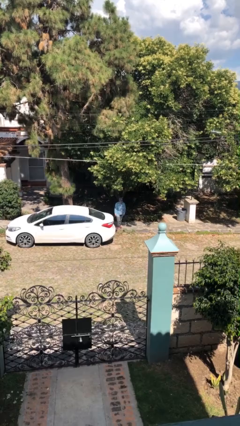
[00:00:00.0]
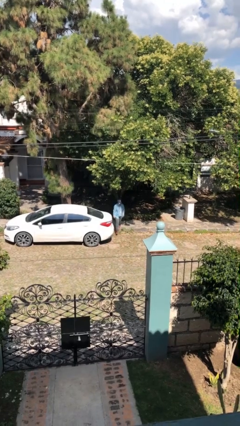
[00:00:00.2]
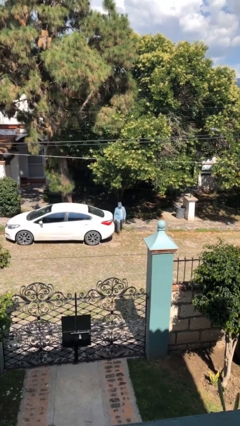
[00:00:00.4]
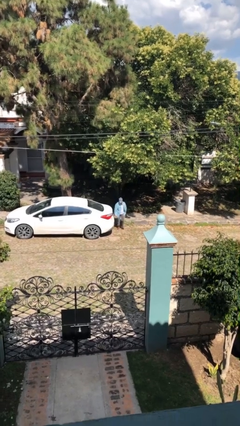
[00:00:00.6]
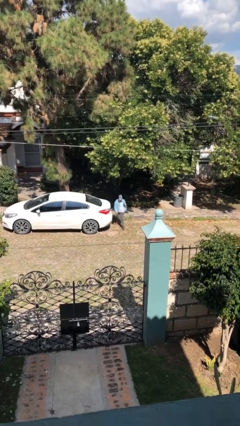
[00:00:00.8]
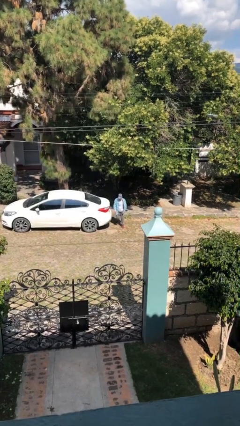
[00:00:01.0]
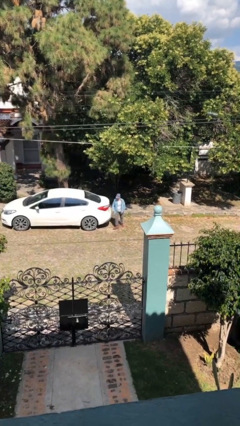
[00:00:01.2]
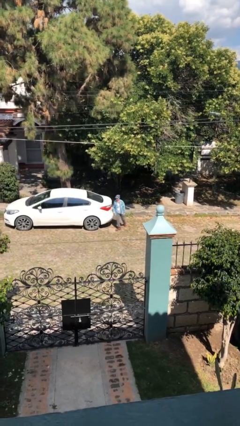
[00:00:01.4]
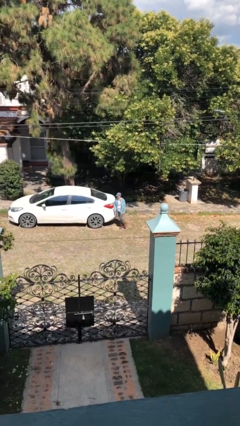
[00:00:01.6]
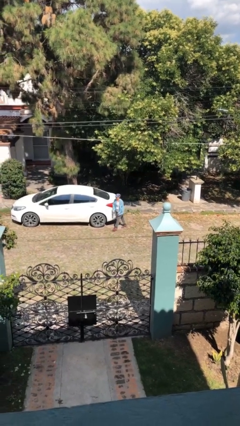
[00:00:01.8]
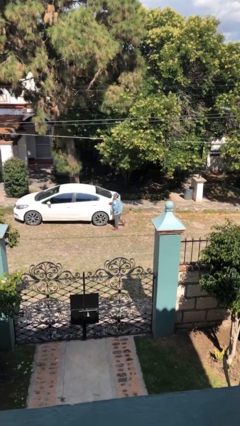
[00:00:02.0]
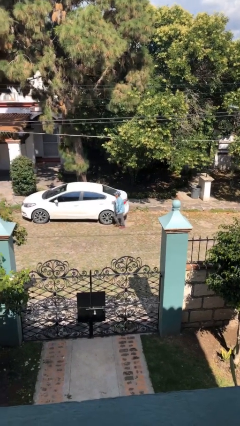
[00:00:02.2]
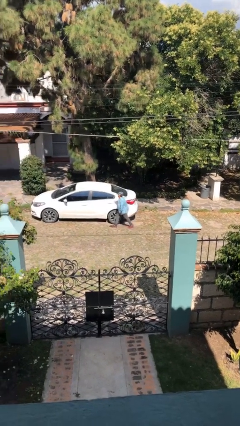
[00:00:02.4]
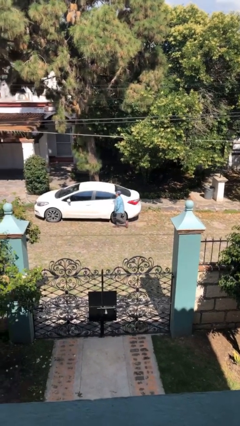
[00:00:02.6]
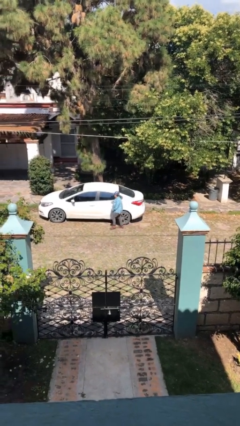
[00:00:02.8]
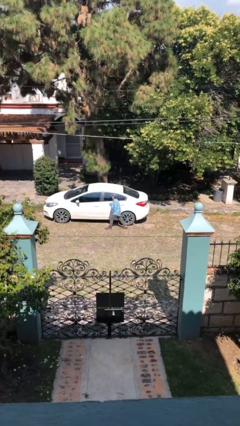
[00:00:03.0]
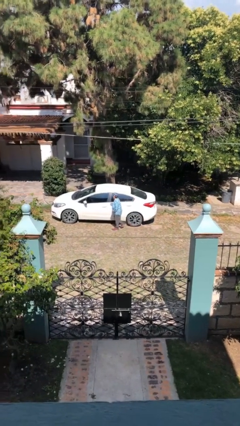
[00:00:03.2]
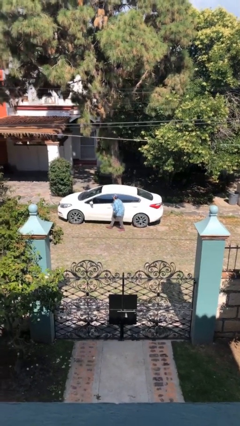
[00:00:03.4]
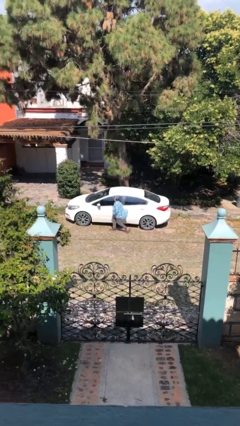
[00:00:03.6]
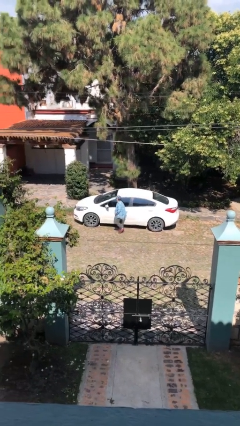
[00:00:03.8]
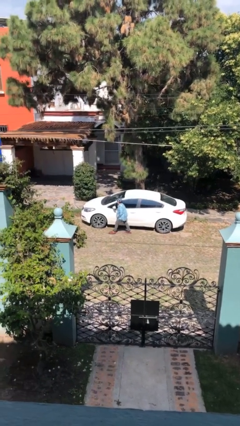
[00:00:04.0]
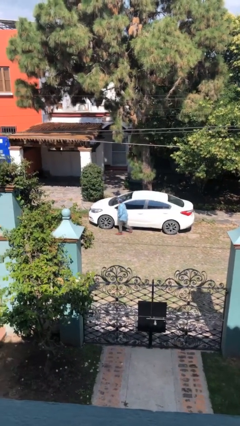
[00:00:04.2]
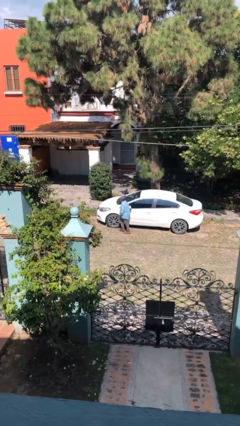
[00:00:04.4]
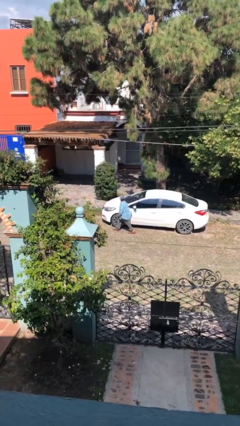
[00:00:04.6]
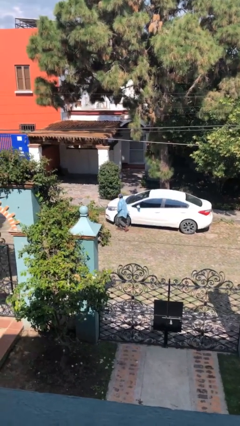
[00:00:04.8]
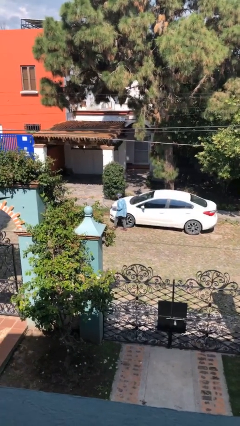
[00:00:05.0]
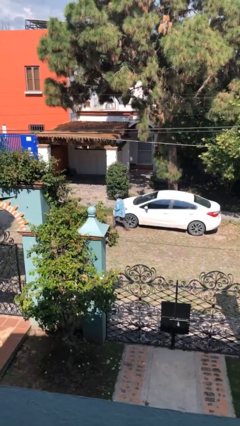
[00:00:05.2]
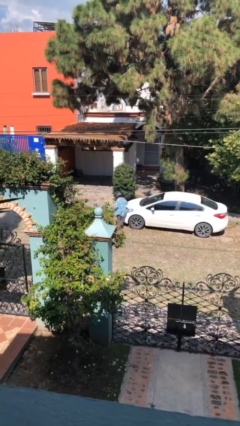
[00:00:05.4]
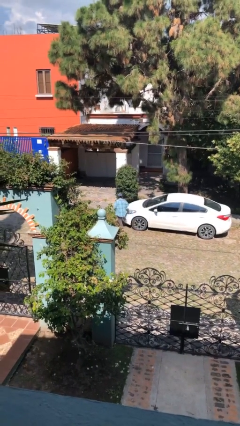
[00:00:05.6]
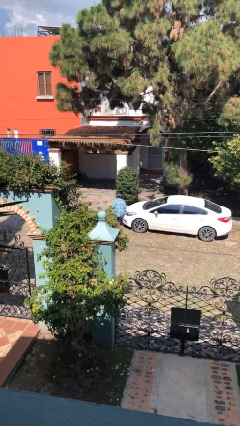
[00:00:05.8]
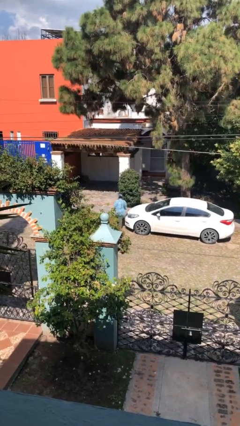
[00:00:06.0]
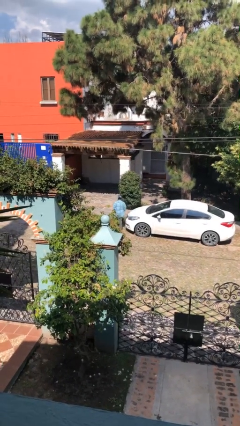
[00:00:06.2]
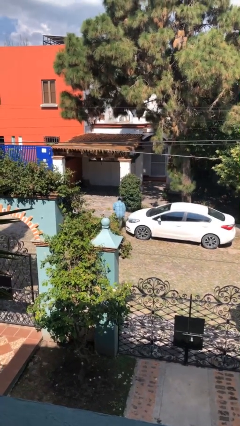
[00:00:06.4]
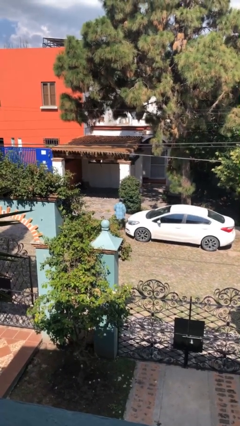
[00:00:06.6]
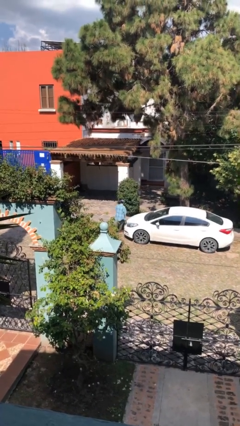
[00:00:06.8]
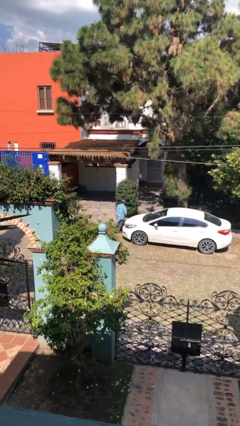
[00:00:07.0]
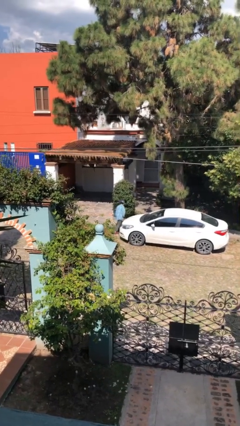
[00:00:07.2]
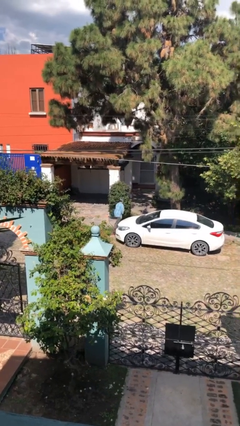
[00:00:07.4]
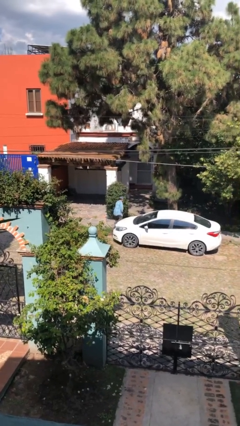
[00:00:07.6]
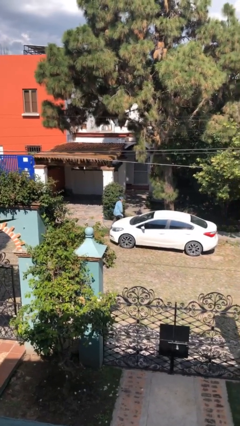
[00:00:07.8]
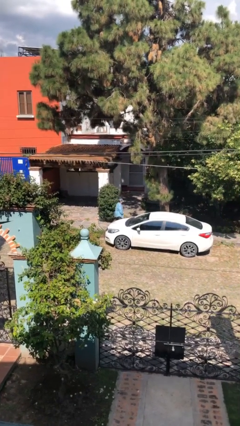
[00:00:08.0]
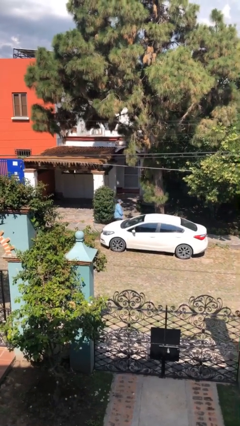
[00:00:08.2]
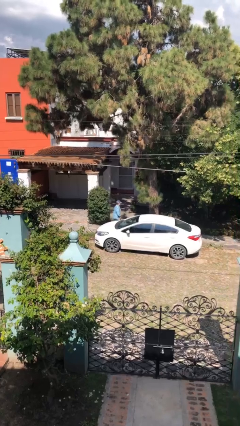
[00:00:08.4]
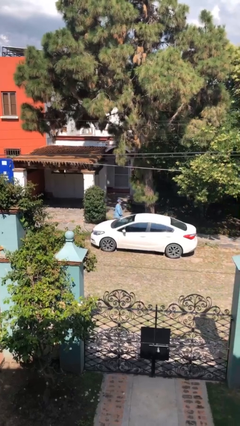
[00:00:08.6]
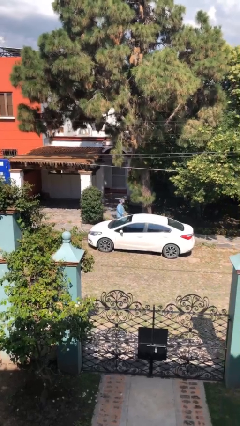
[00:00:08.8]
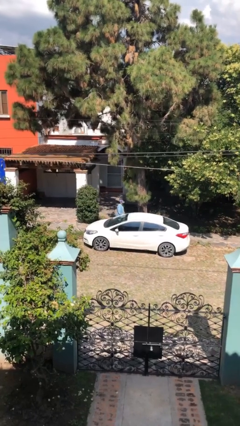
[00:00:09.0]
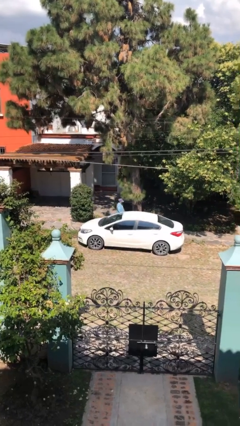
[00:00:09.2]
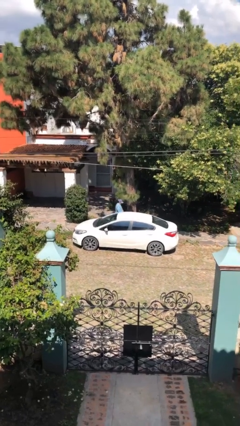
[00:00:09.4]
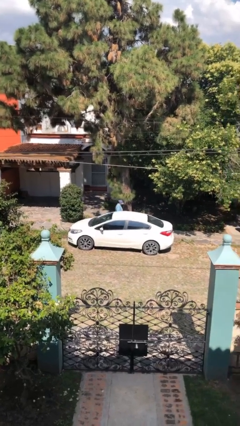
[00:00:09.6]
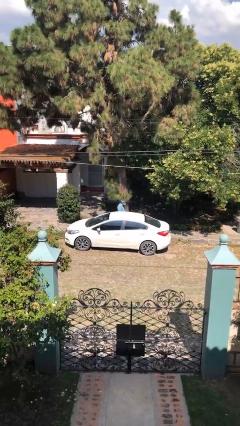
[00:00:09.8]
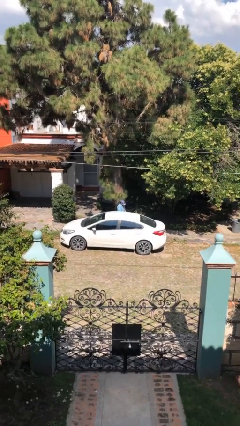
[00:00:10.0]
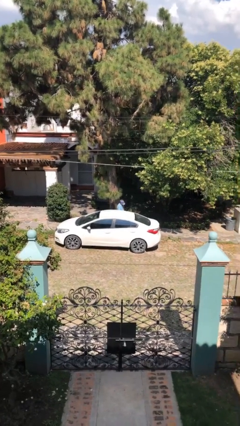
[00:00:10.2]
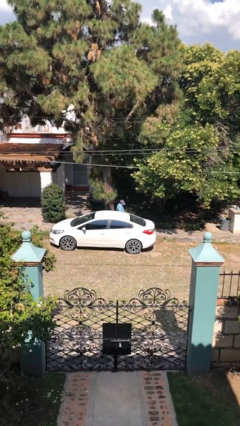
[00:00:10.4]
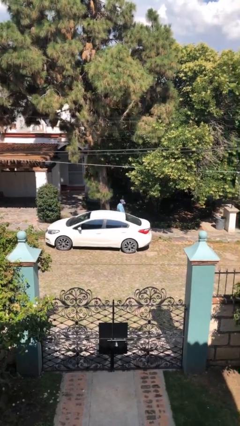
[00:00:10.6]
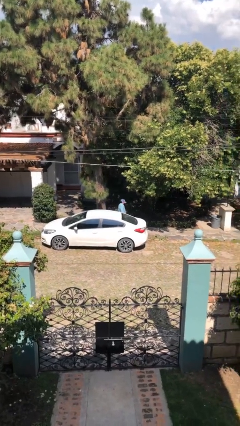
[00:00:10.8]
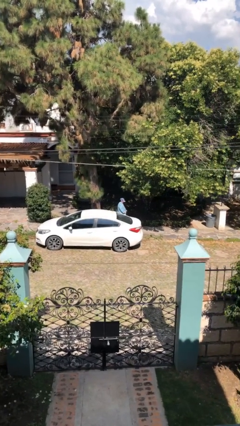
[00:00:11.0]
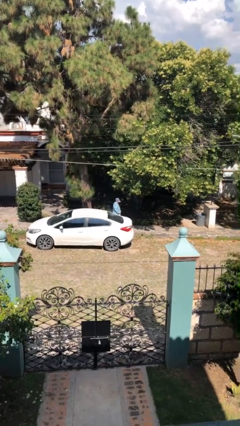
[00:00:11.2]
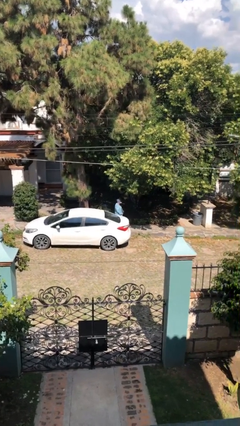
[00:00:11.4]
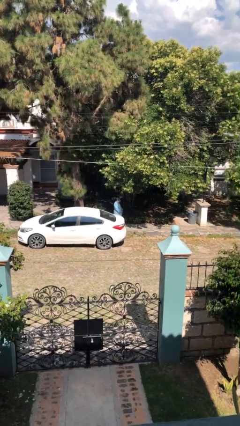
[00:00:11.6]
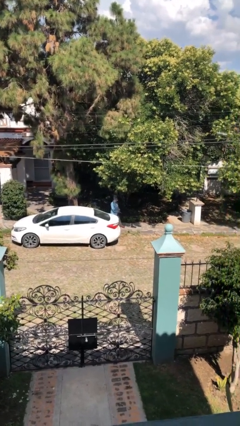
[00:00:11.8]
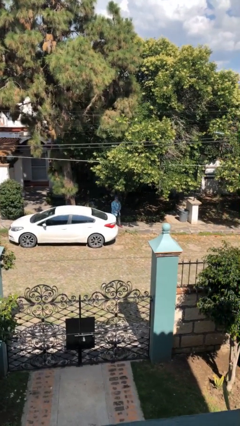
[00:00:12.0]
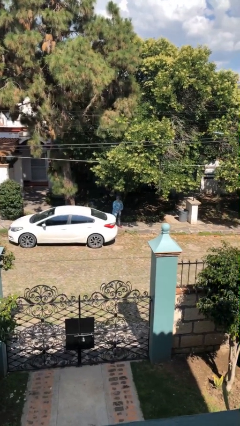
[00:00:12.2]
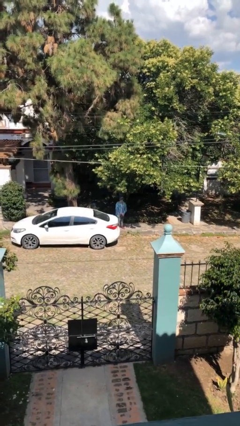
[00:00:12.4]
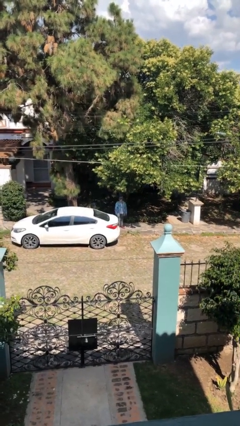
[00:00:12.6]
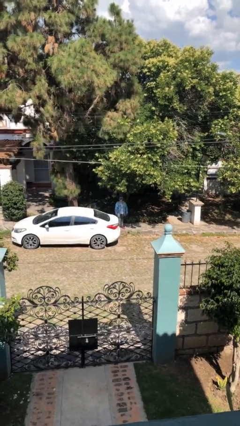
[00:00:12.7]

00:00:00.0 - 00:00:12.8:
person walks around car

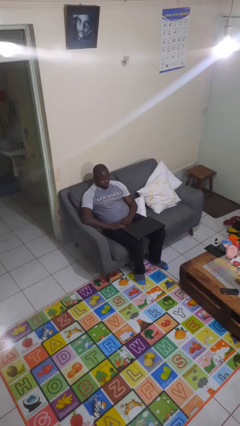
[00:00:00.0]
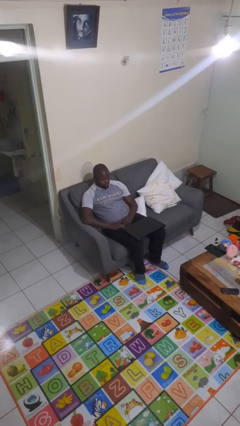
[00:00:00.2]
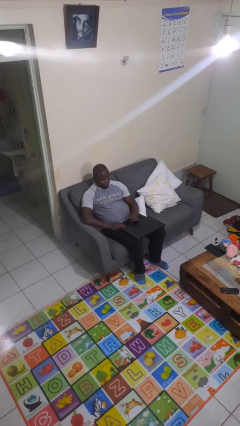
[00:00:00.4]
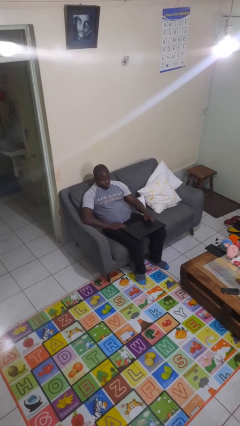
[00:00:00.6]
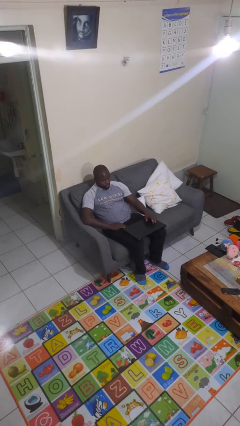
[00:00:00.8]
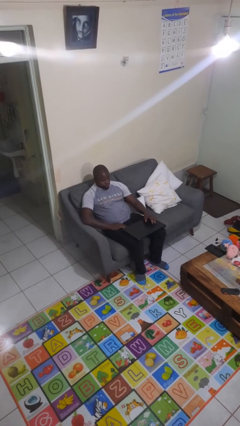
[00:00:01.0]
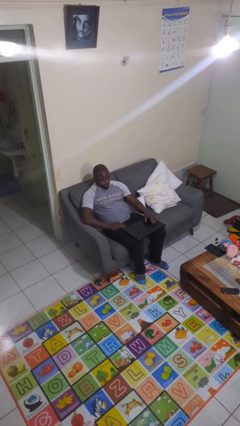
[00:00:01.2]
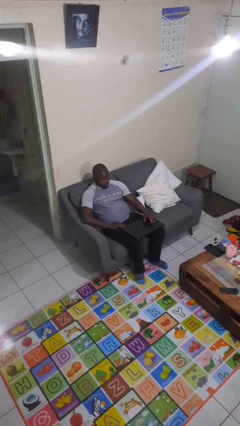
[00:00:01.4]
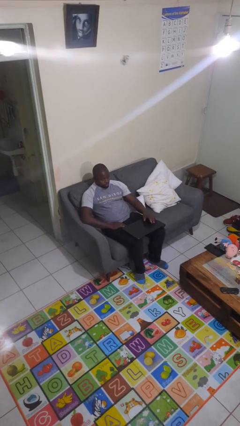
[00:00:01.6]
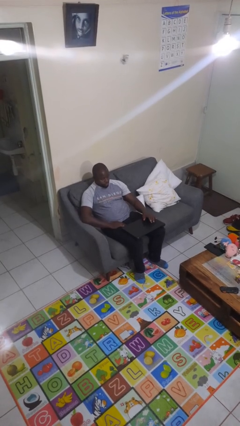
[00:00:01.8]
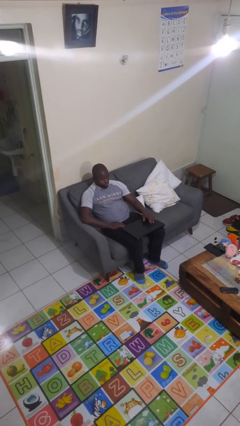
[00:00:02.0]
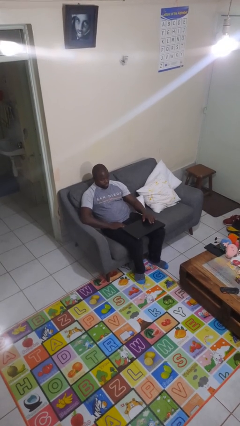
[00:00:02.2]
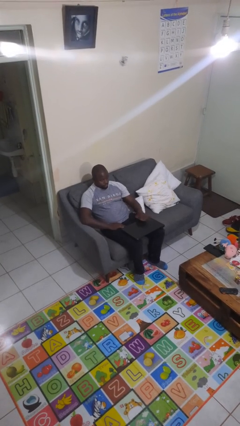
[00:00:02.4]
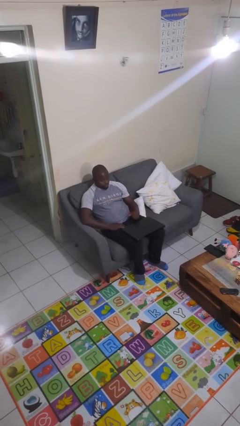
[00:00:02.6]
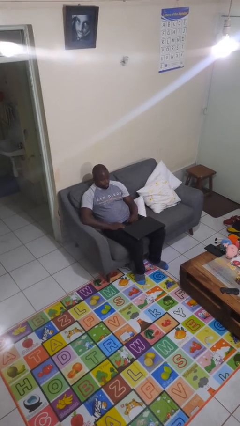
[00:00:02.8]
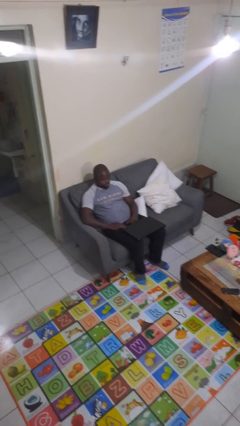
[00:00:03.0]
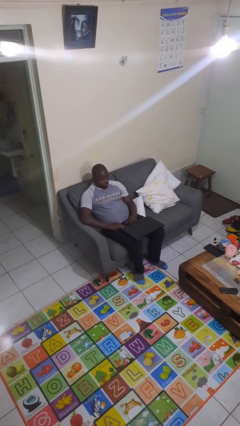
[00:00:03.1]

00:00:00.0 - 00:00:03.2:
person taps object with finger

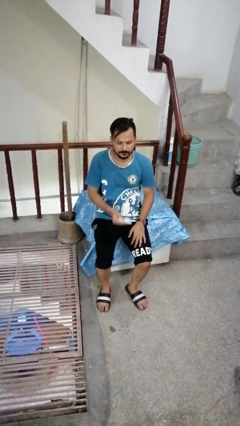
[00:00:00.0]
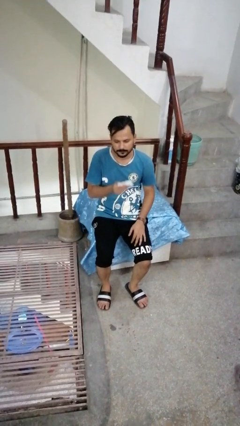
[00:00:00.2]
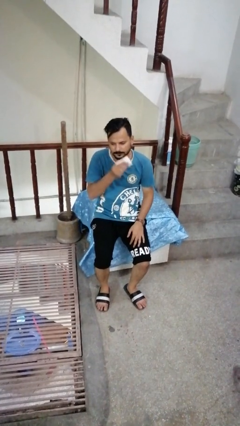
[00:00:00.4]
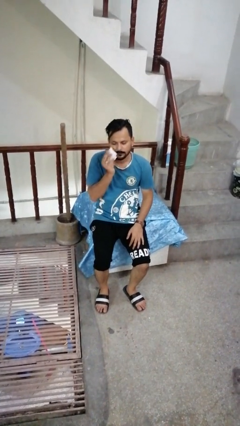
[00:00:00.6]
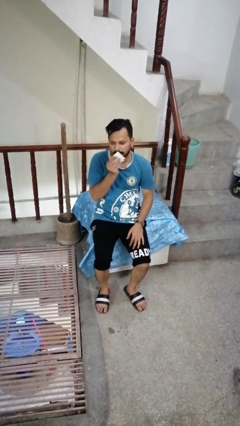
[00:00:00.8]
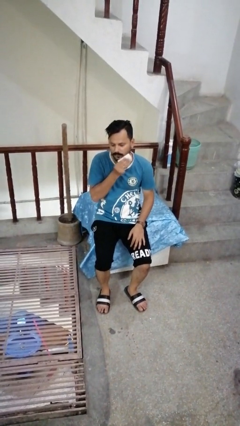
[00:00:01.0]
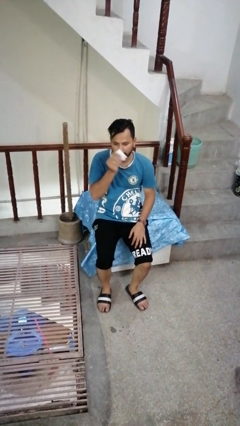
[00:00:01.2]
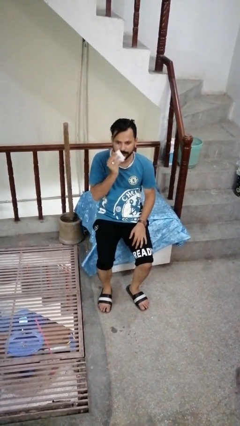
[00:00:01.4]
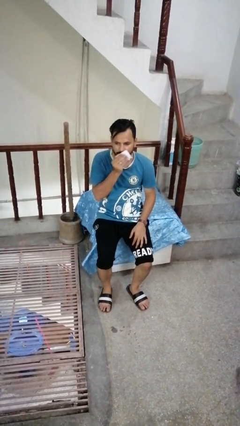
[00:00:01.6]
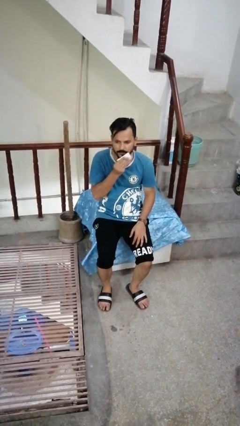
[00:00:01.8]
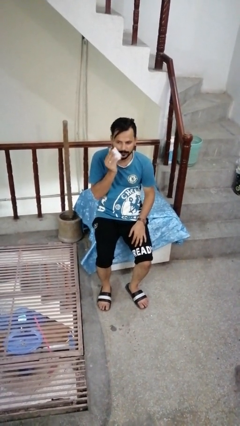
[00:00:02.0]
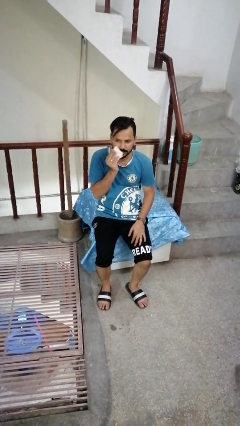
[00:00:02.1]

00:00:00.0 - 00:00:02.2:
person wipes mouth with napkin

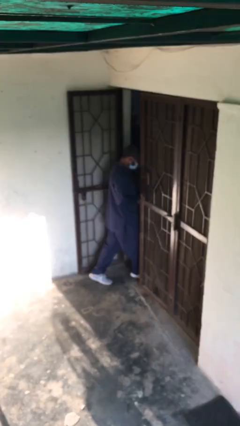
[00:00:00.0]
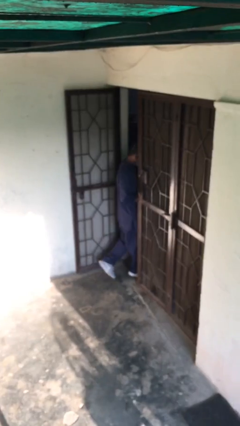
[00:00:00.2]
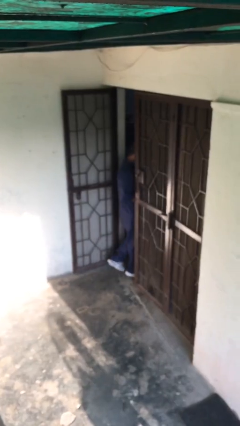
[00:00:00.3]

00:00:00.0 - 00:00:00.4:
person exits scene through structure
